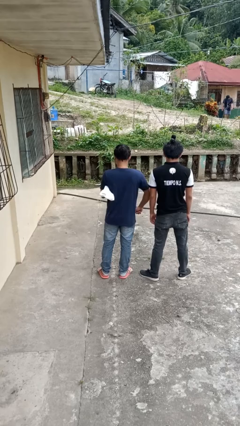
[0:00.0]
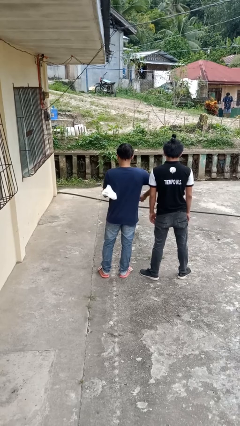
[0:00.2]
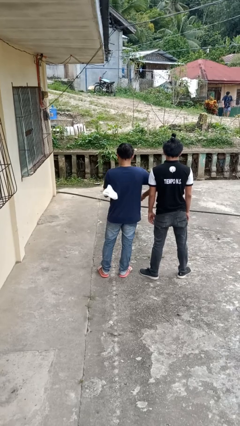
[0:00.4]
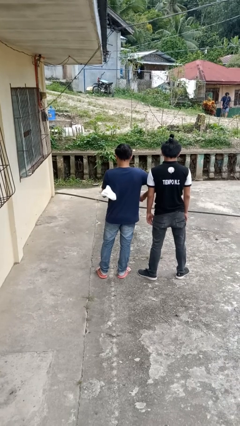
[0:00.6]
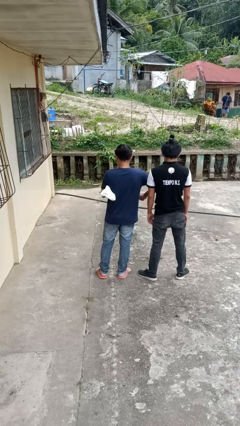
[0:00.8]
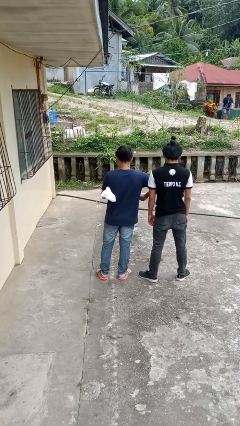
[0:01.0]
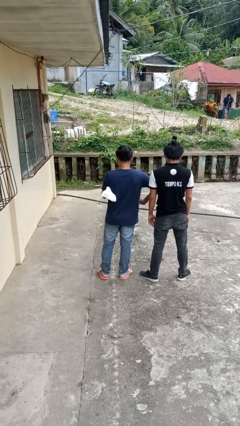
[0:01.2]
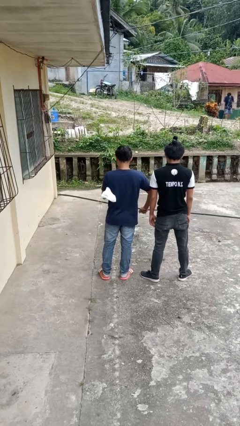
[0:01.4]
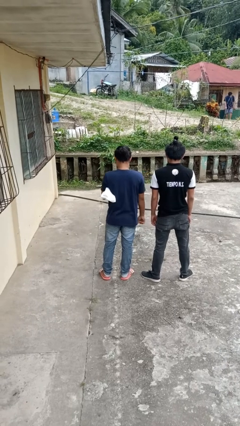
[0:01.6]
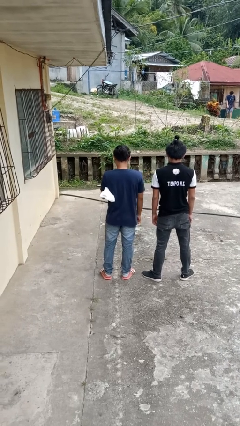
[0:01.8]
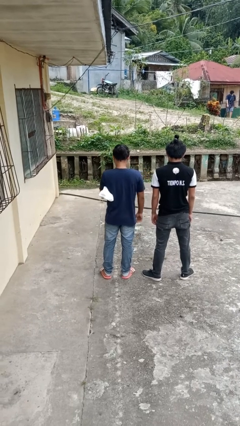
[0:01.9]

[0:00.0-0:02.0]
person nudges person with elbow

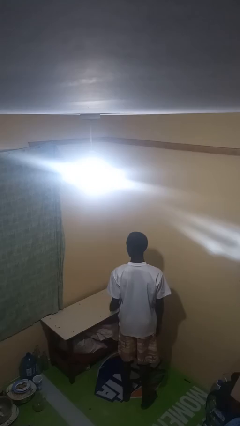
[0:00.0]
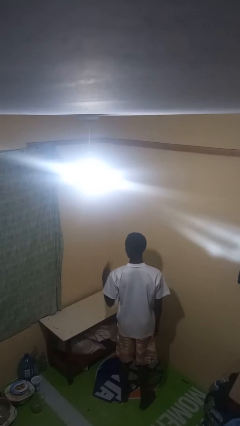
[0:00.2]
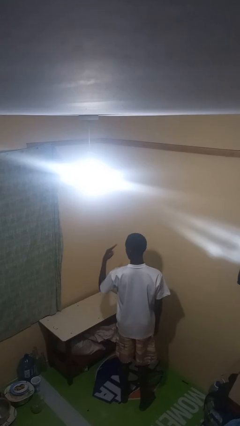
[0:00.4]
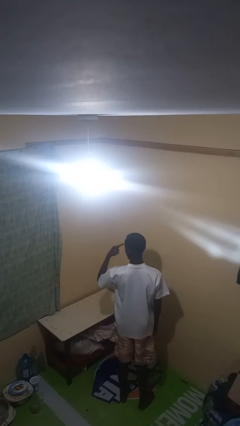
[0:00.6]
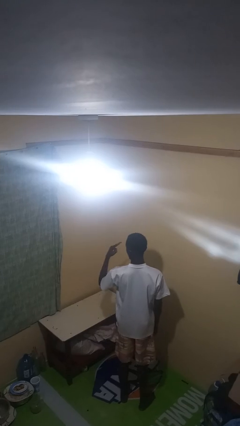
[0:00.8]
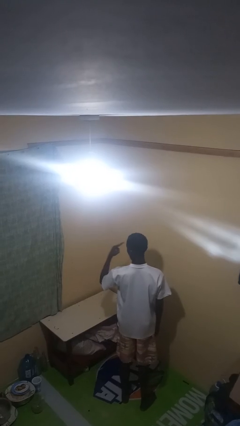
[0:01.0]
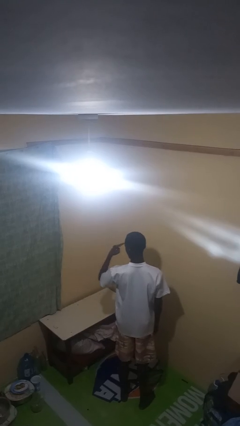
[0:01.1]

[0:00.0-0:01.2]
person gestures watch closely

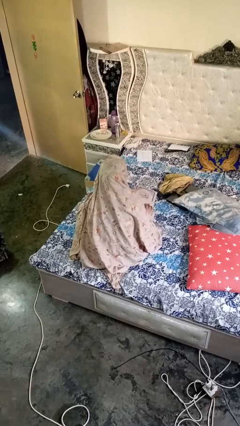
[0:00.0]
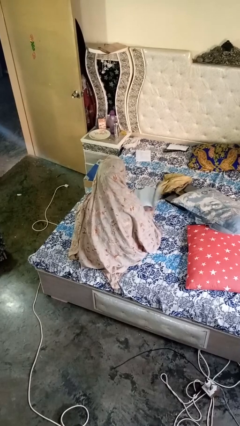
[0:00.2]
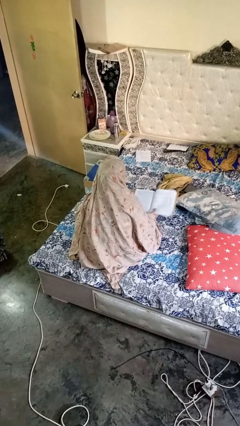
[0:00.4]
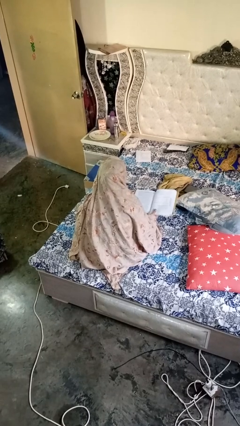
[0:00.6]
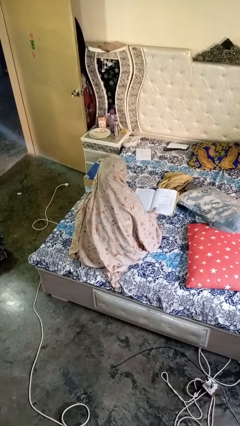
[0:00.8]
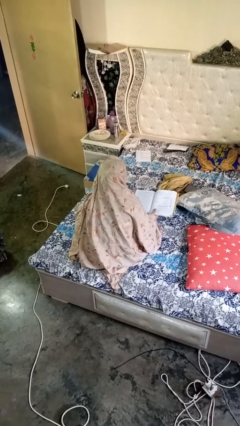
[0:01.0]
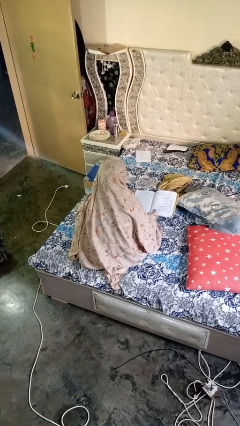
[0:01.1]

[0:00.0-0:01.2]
person reads book

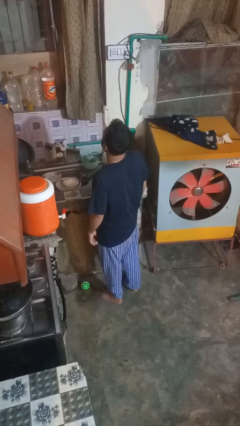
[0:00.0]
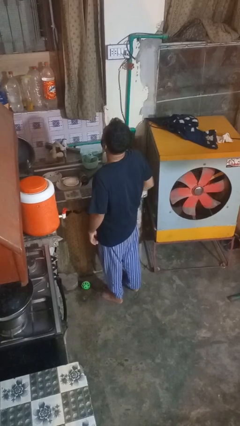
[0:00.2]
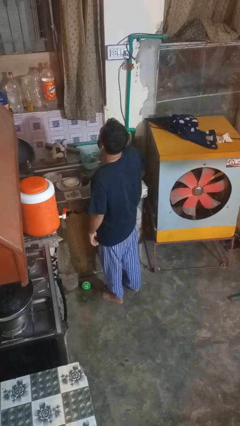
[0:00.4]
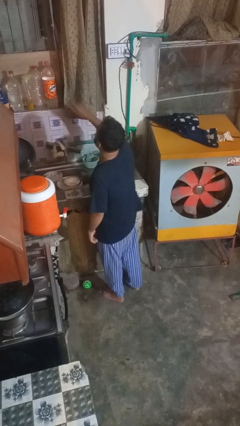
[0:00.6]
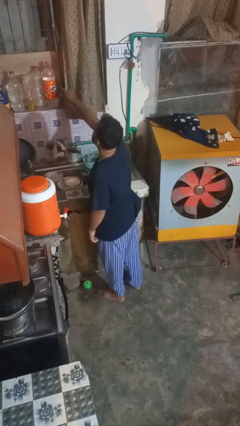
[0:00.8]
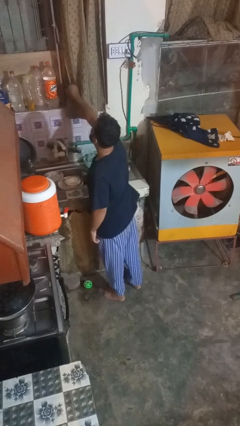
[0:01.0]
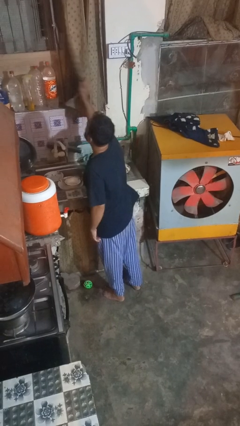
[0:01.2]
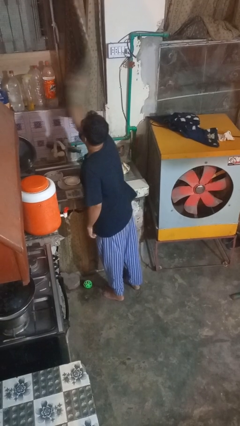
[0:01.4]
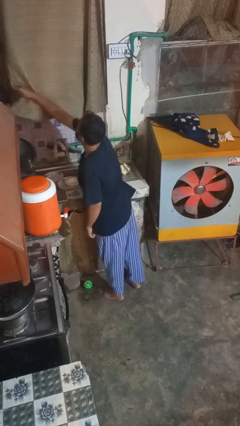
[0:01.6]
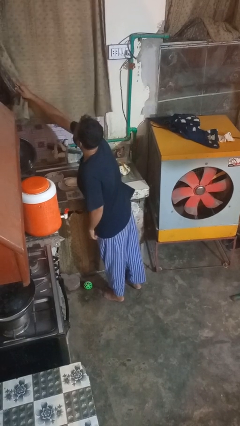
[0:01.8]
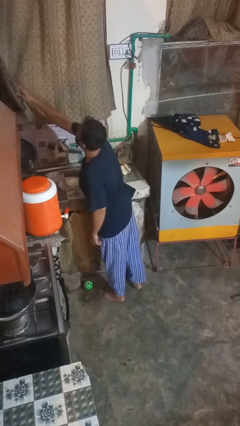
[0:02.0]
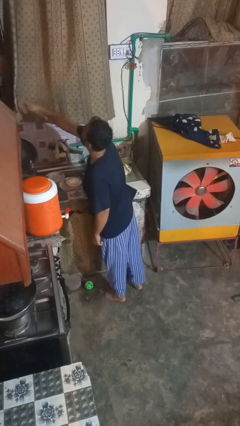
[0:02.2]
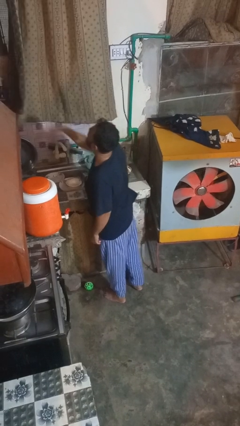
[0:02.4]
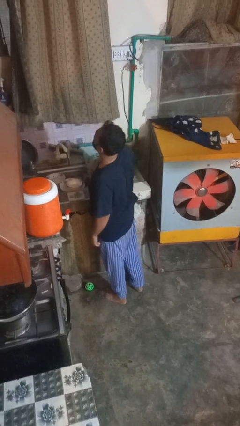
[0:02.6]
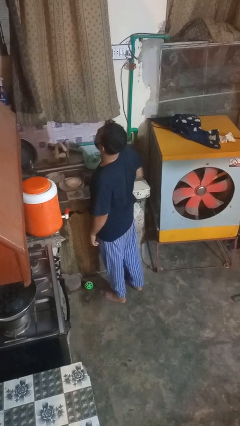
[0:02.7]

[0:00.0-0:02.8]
person closes curtains

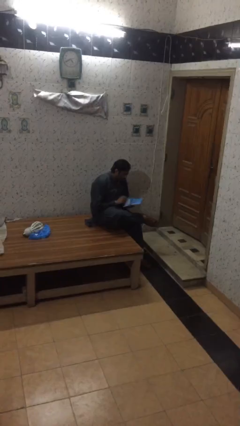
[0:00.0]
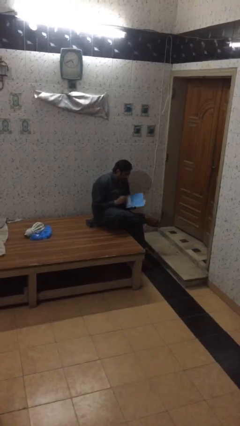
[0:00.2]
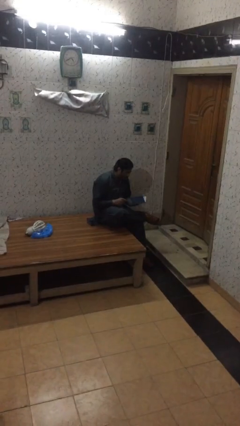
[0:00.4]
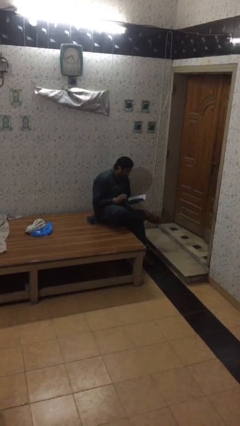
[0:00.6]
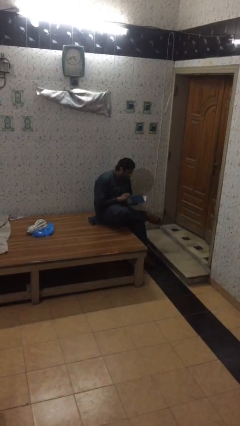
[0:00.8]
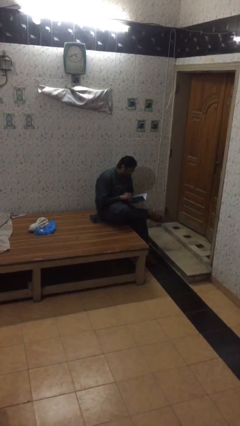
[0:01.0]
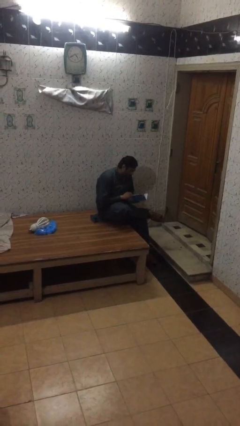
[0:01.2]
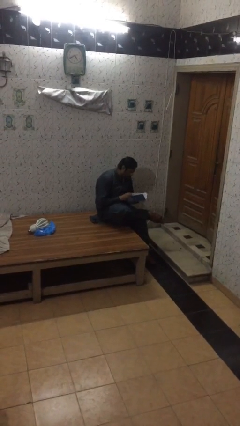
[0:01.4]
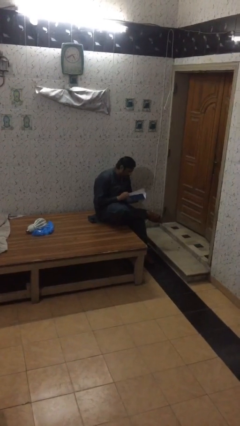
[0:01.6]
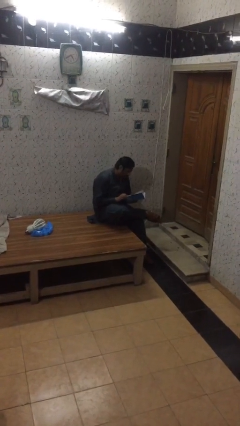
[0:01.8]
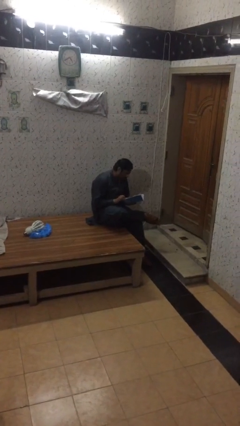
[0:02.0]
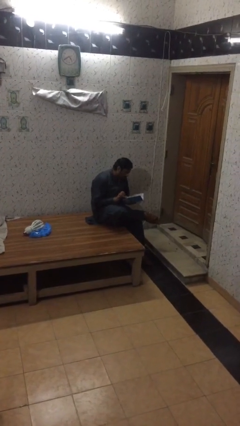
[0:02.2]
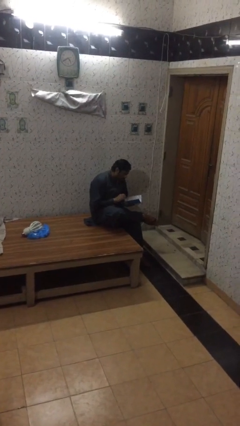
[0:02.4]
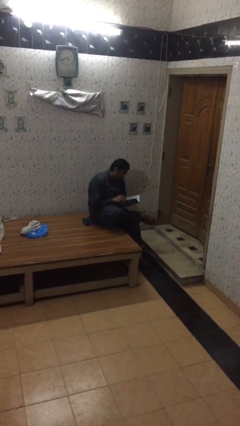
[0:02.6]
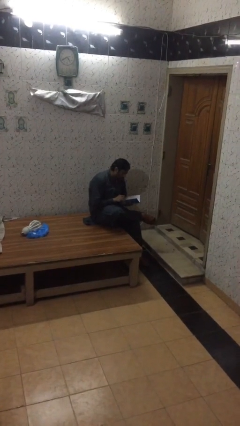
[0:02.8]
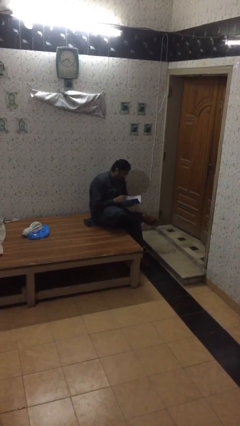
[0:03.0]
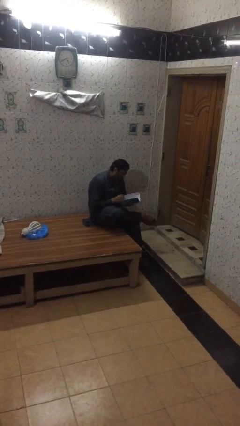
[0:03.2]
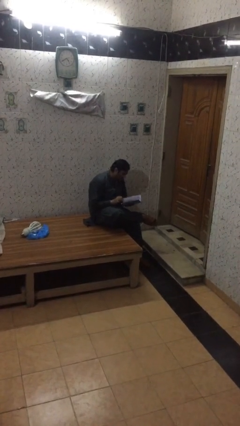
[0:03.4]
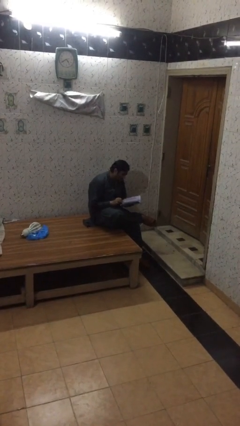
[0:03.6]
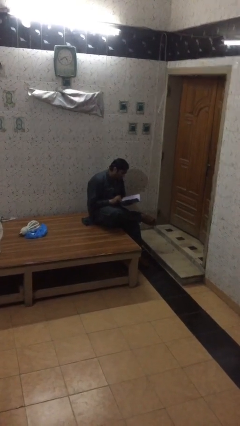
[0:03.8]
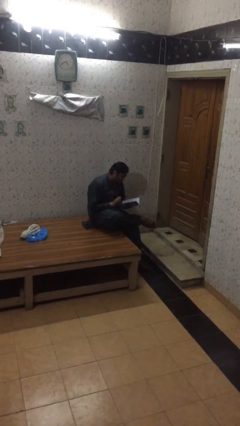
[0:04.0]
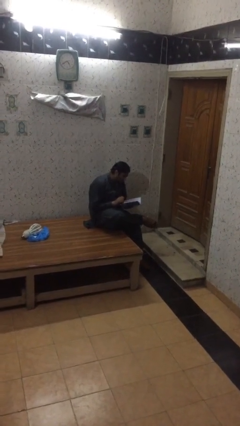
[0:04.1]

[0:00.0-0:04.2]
person reads document

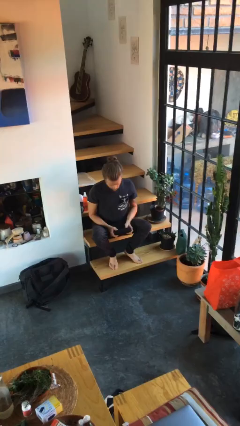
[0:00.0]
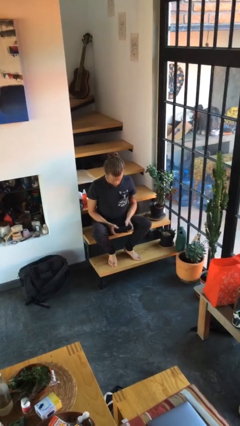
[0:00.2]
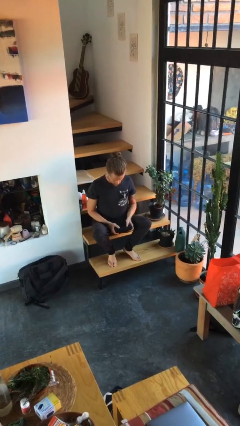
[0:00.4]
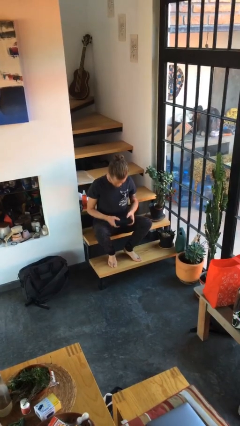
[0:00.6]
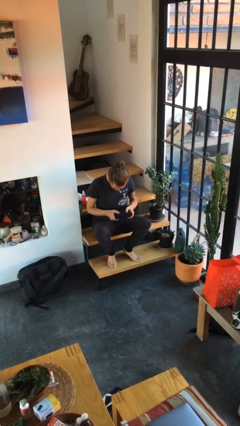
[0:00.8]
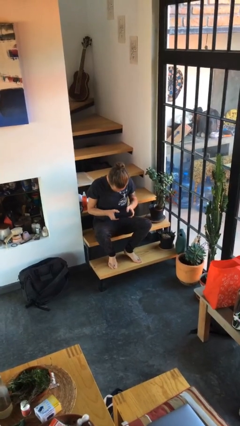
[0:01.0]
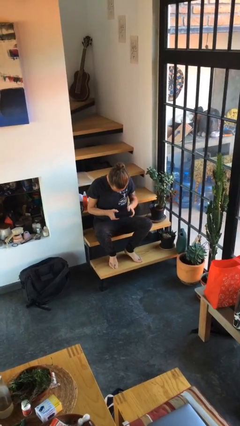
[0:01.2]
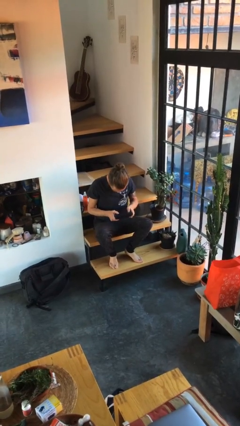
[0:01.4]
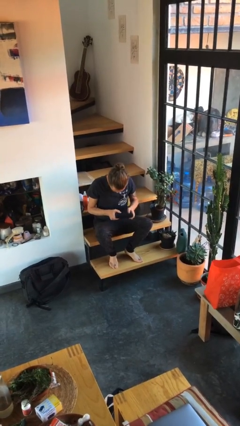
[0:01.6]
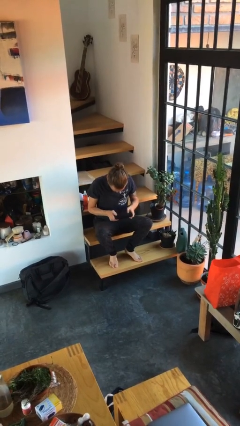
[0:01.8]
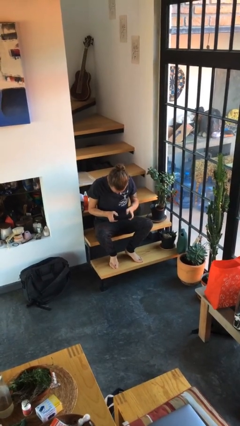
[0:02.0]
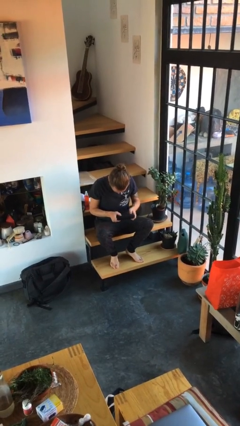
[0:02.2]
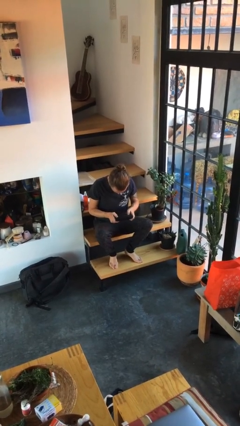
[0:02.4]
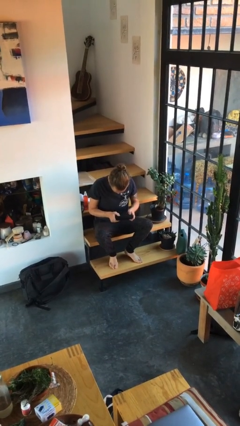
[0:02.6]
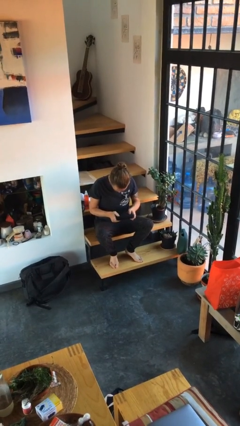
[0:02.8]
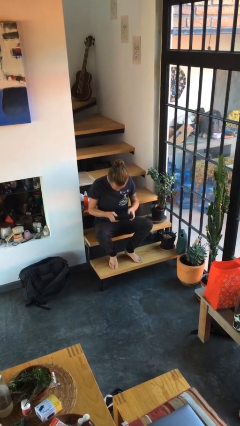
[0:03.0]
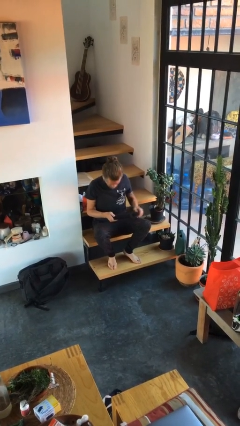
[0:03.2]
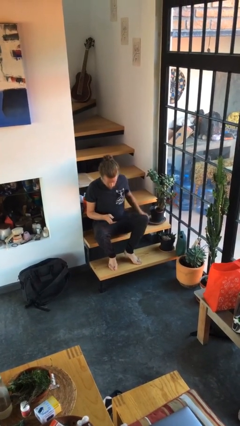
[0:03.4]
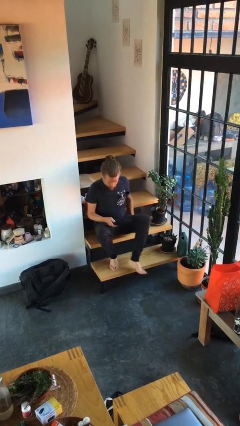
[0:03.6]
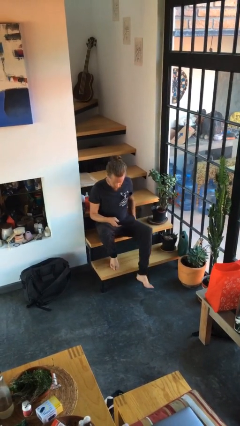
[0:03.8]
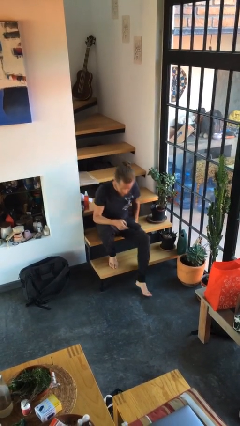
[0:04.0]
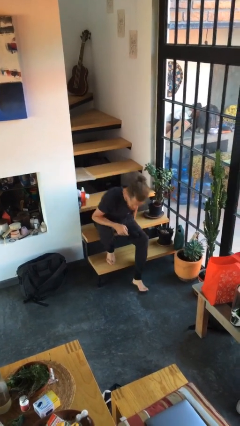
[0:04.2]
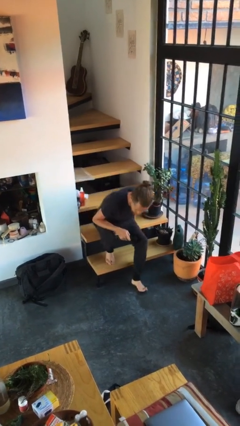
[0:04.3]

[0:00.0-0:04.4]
person interacts with handheld game

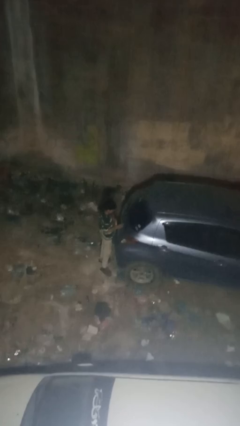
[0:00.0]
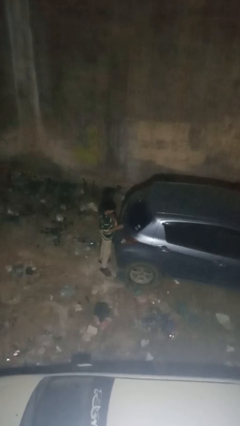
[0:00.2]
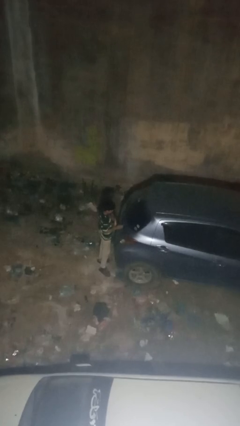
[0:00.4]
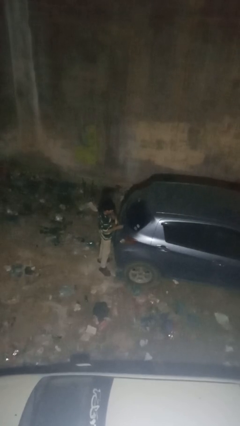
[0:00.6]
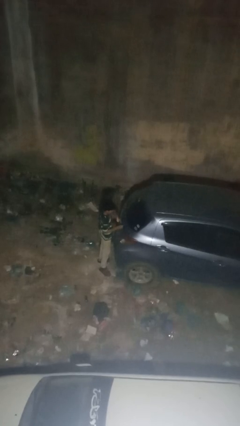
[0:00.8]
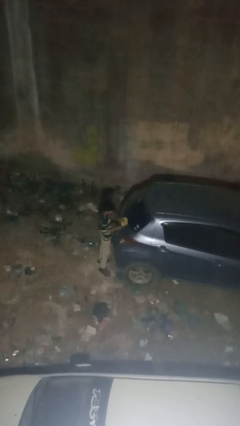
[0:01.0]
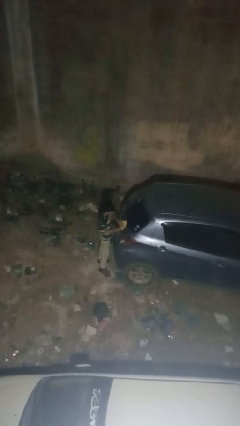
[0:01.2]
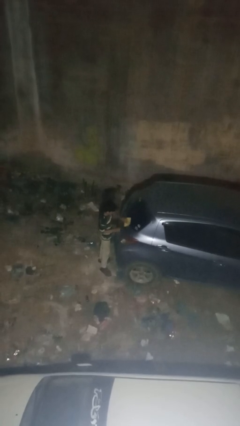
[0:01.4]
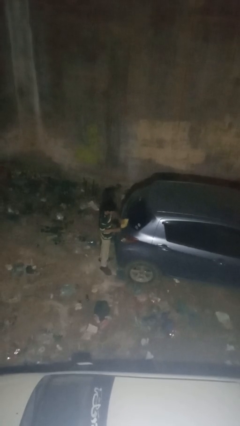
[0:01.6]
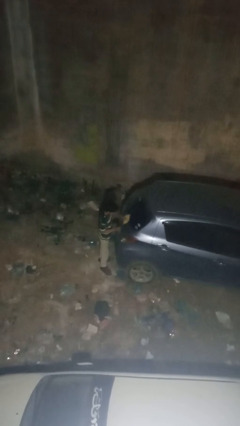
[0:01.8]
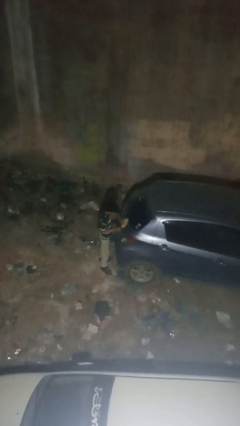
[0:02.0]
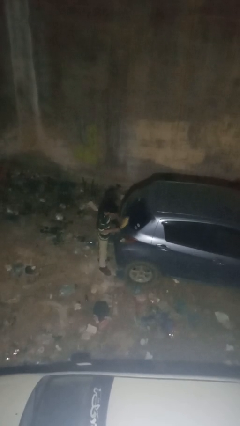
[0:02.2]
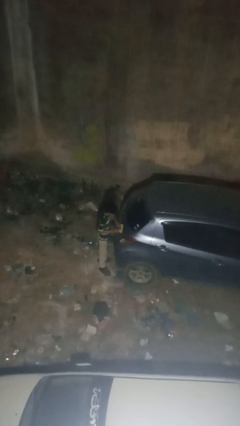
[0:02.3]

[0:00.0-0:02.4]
person polishes car with rag
